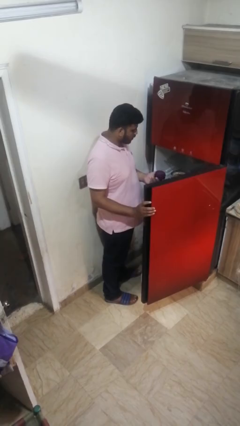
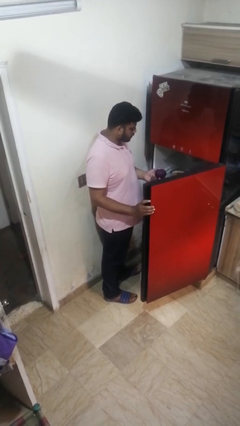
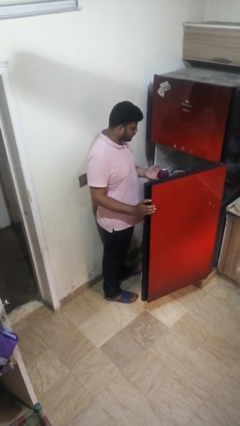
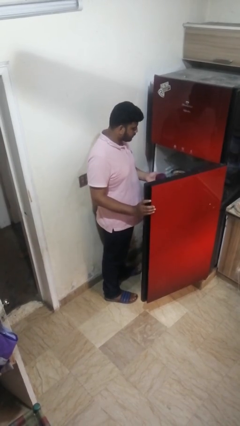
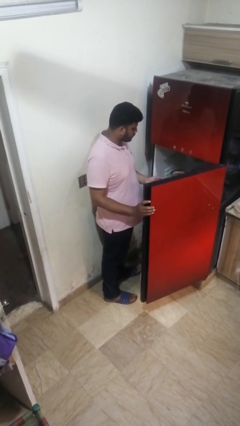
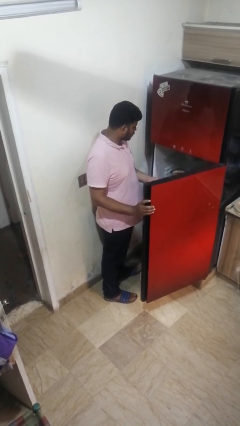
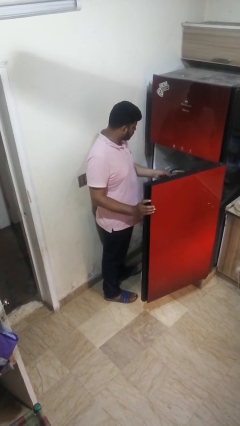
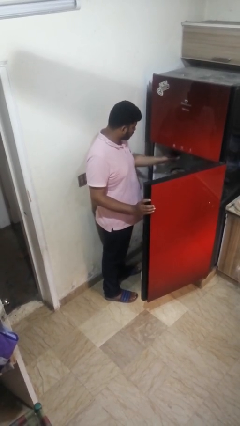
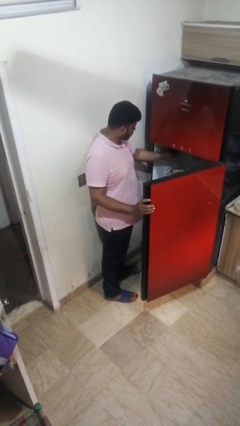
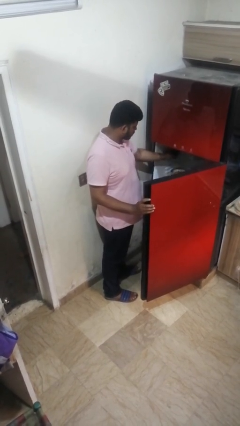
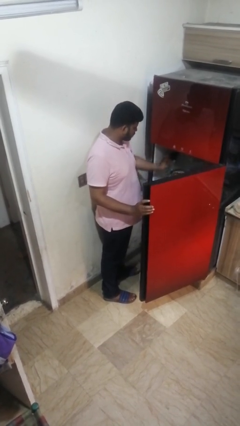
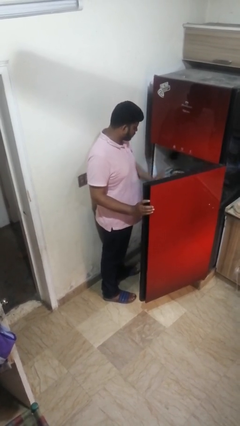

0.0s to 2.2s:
person puts object into refrigerator

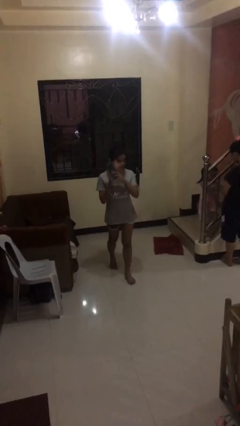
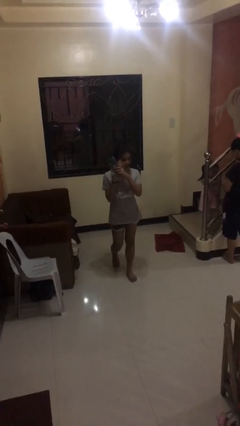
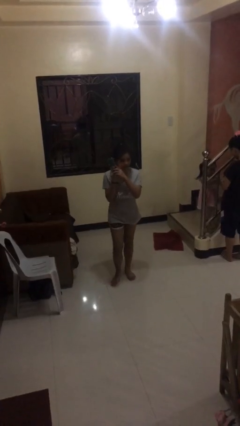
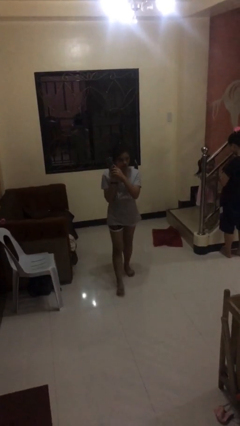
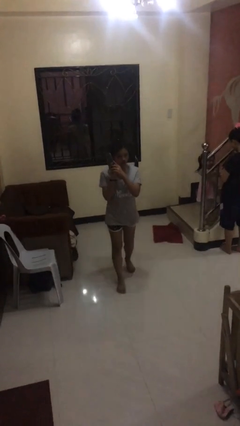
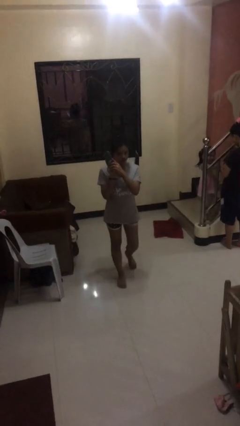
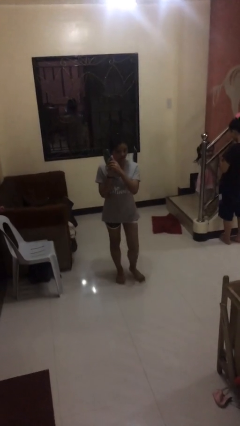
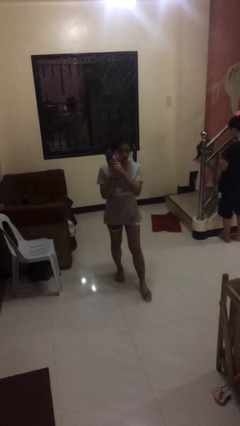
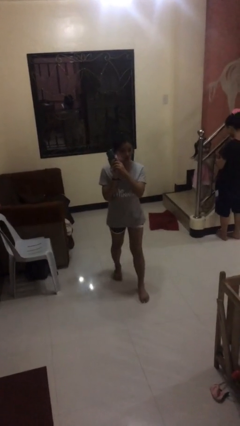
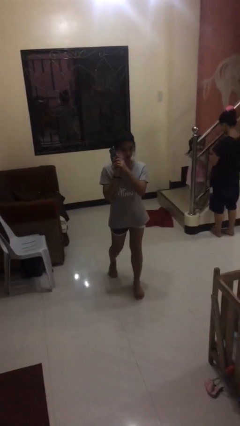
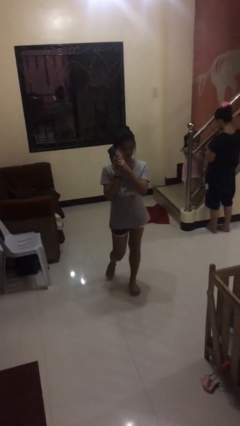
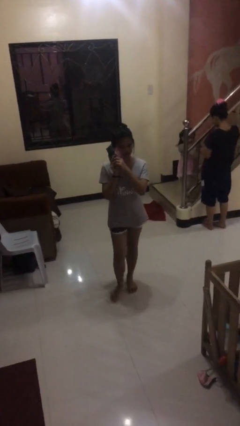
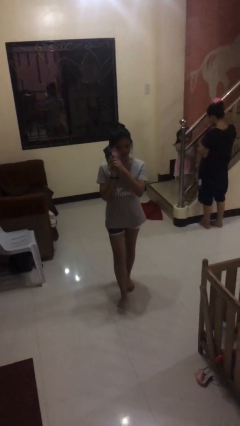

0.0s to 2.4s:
person talks on phone

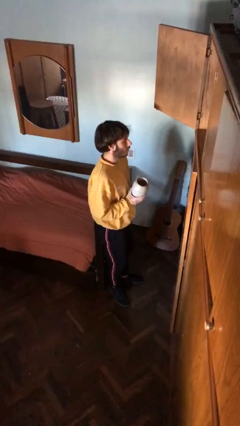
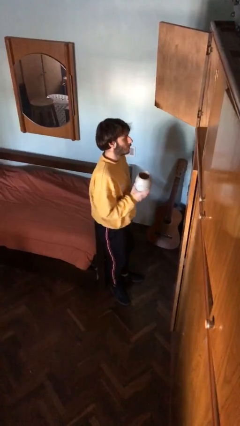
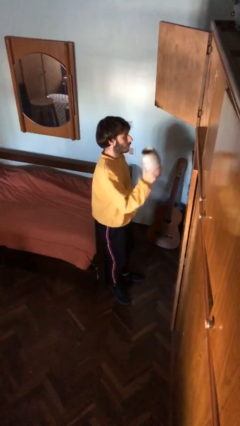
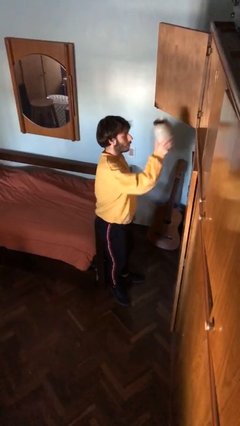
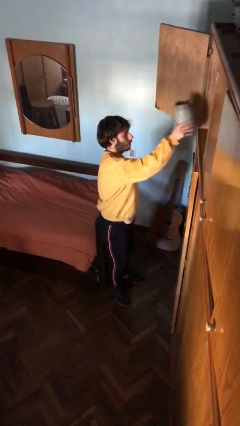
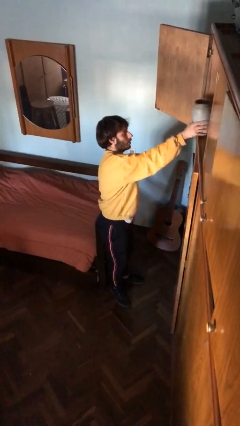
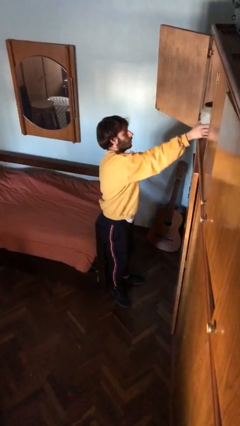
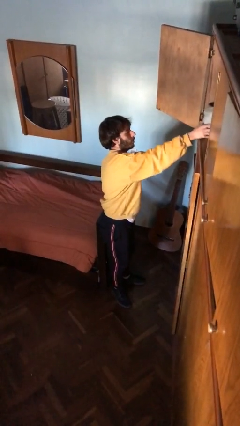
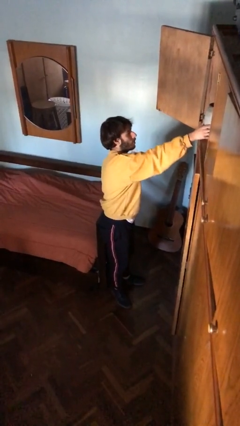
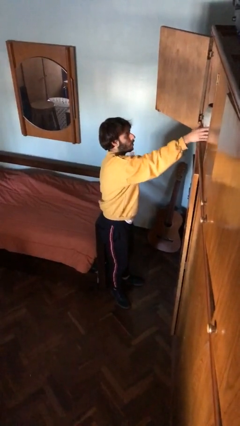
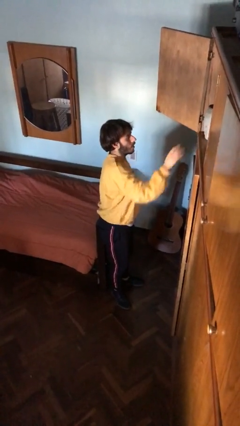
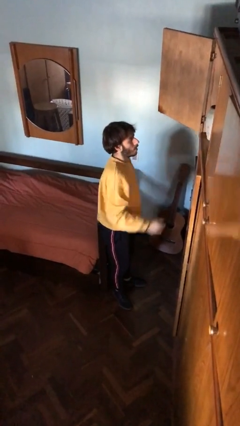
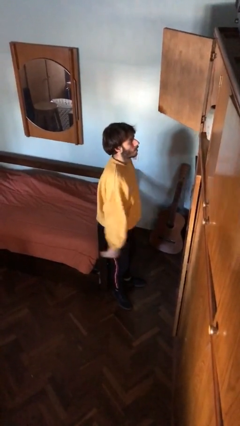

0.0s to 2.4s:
person puts down object into cabinet

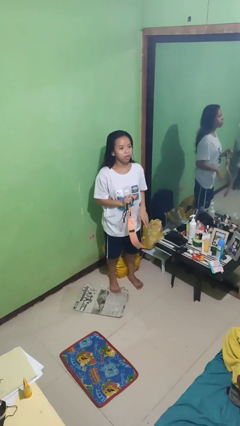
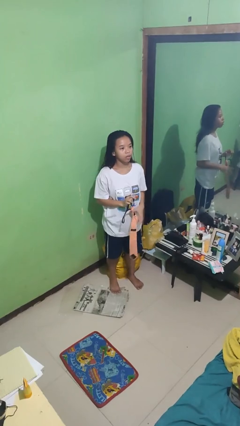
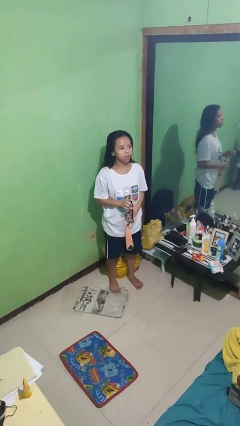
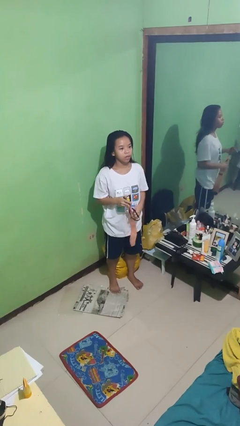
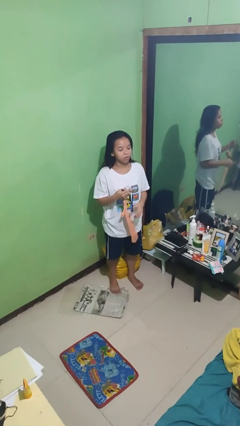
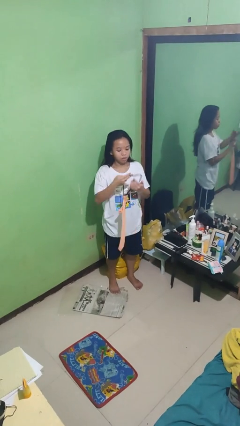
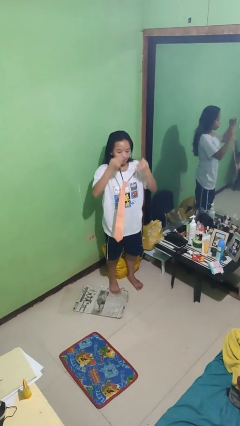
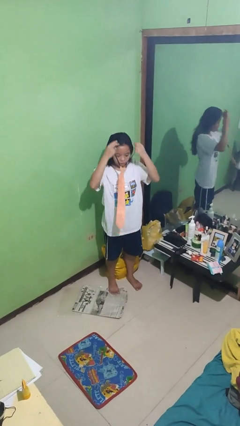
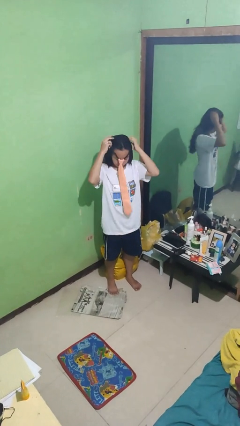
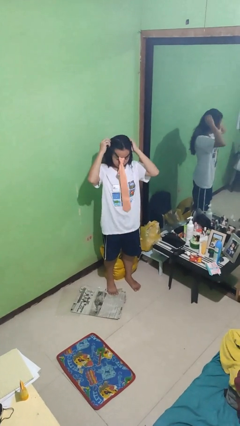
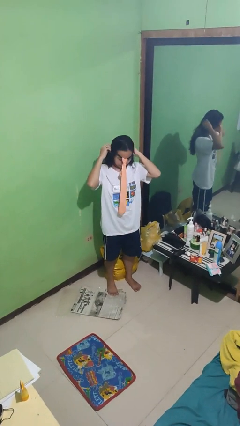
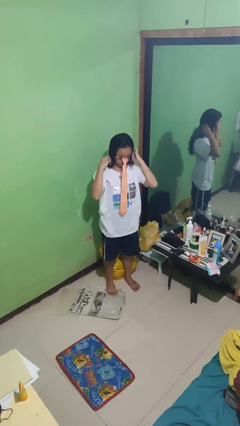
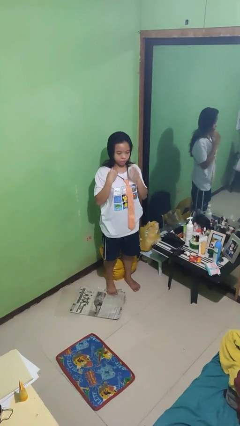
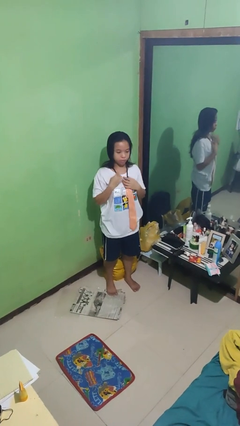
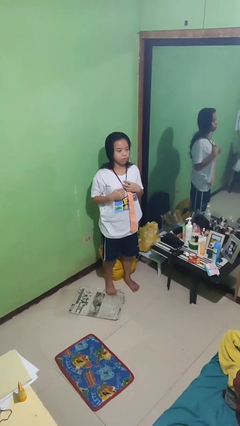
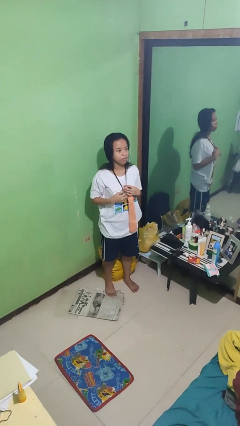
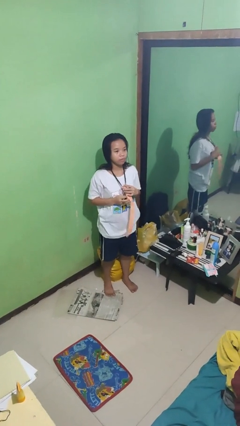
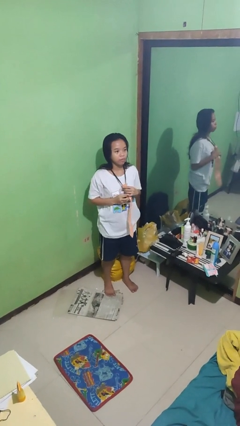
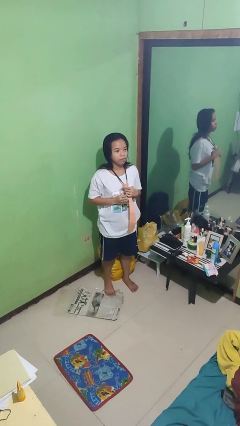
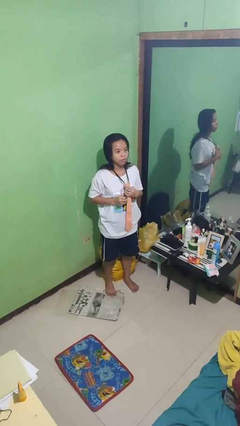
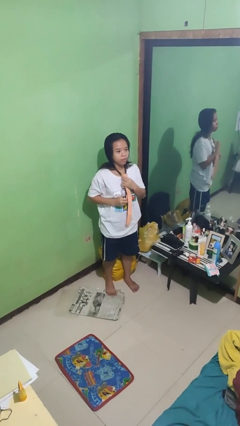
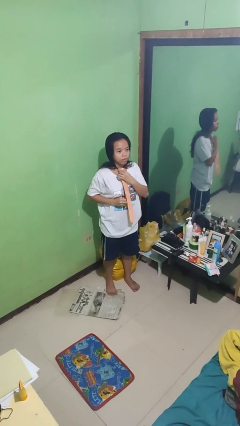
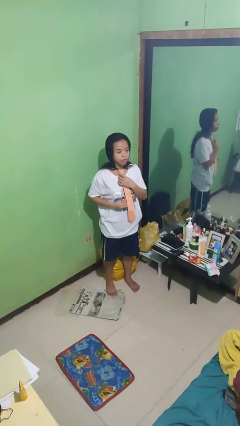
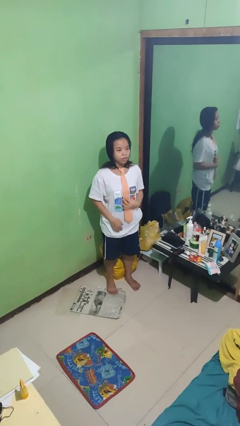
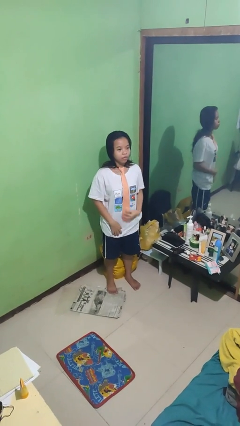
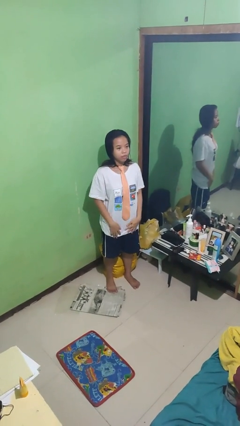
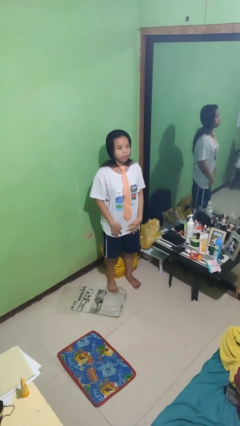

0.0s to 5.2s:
person puts on necktie

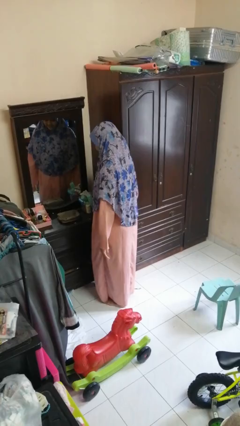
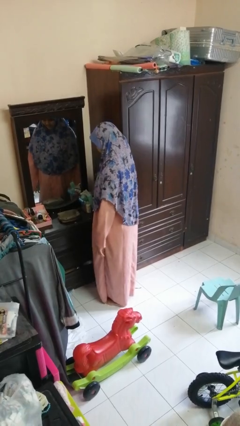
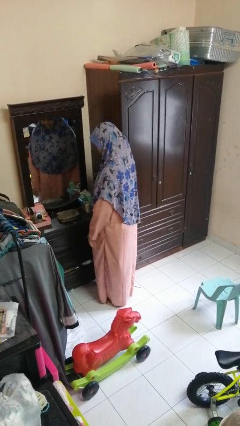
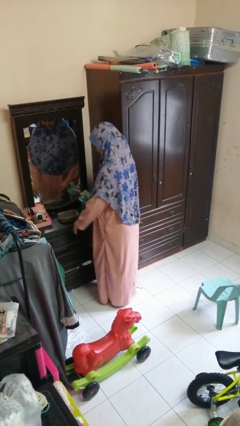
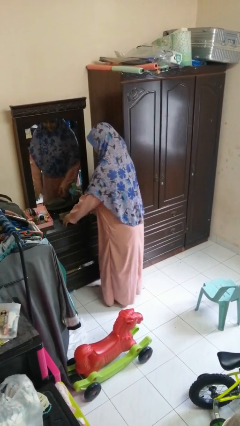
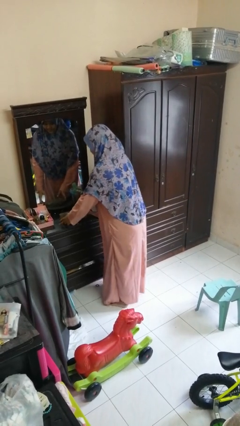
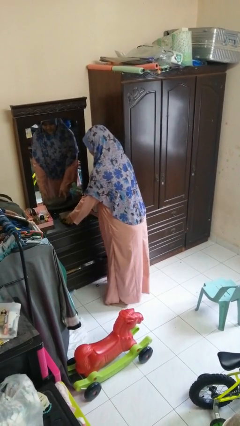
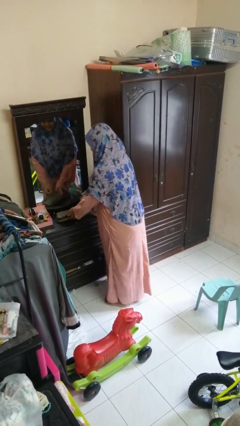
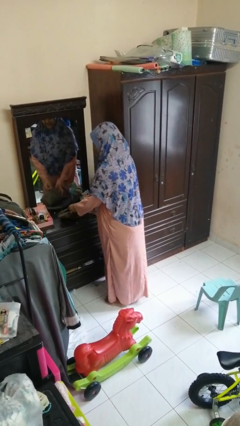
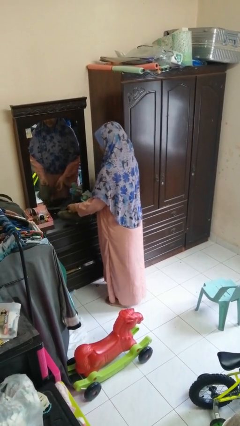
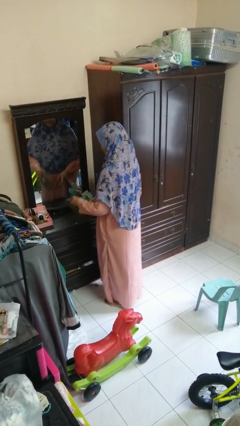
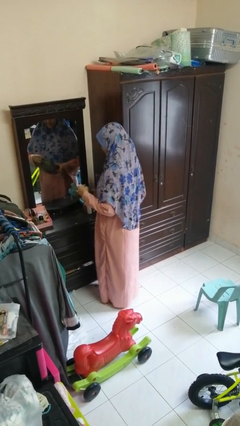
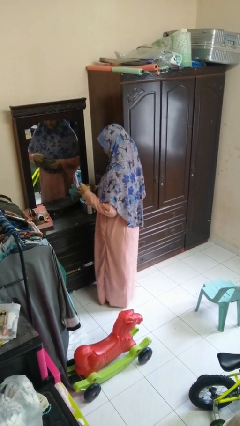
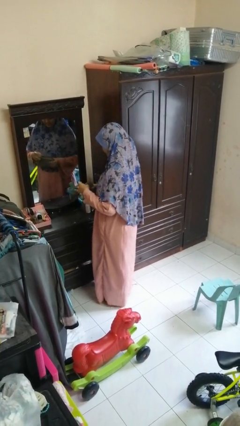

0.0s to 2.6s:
person picks up object from countertop

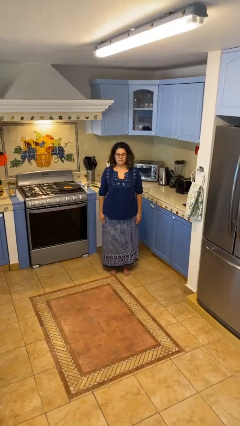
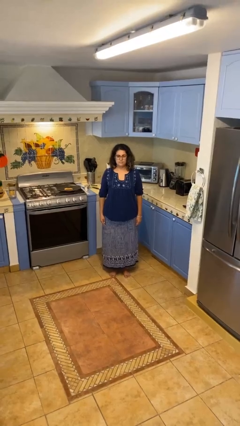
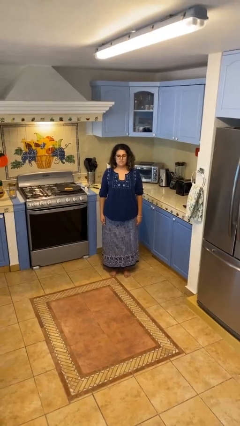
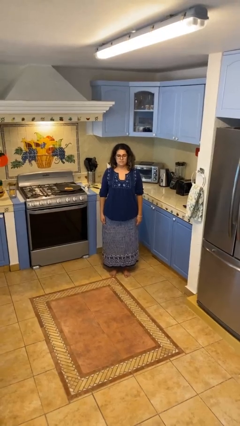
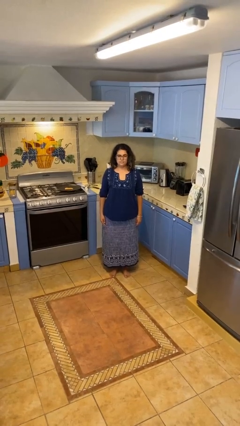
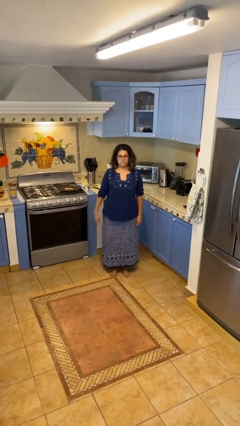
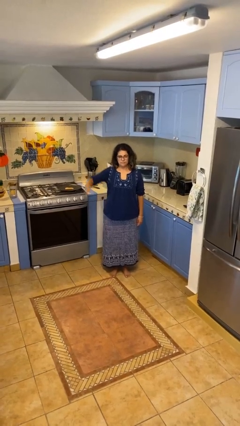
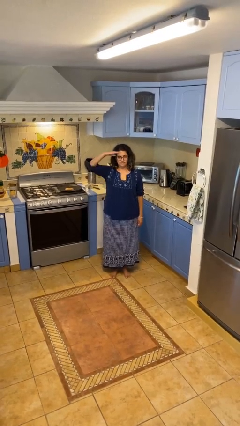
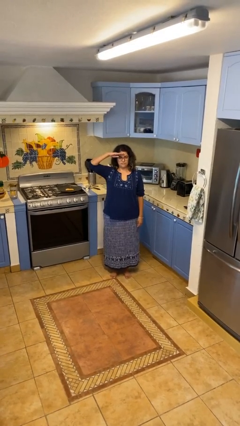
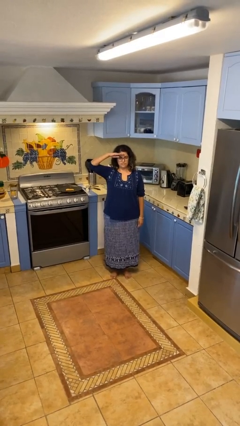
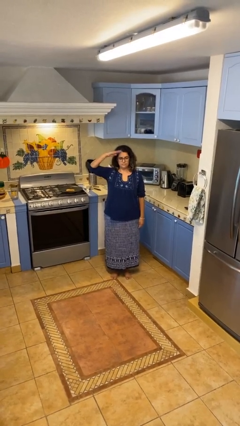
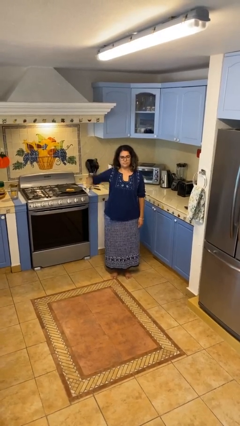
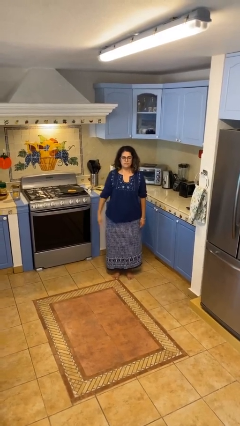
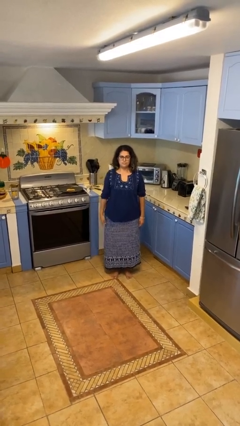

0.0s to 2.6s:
person salutes
